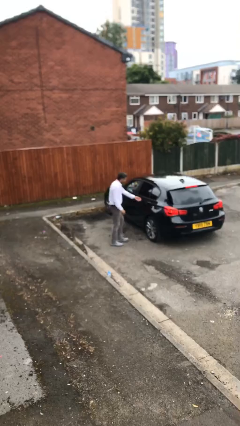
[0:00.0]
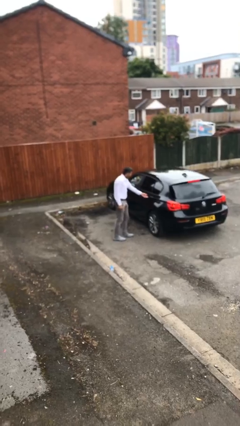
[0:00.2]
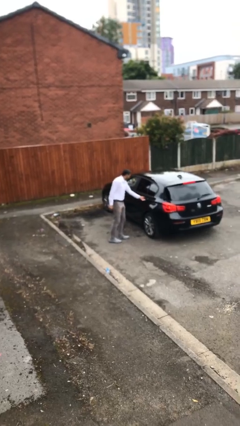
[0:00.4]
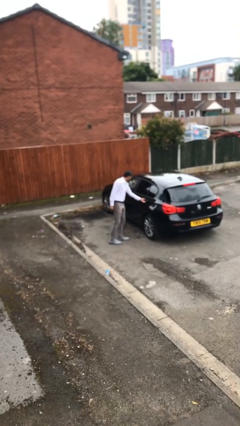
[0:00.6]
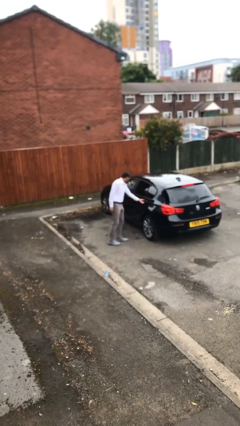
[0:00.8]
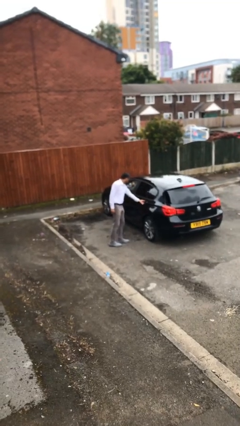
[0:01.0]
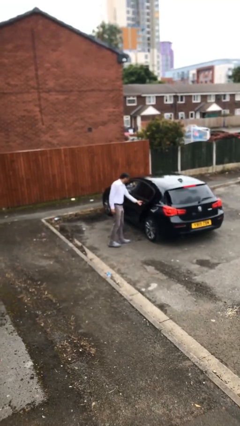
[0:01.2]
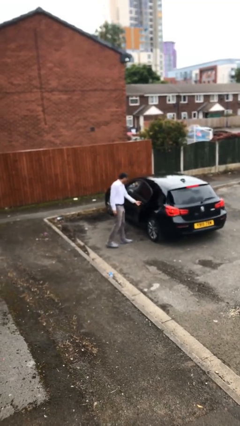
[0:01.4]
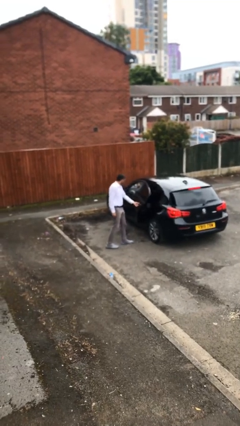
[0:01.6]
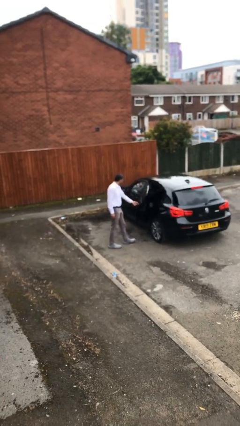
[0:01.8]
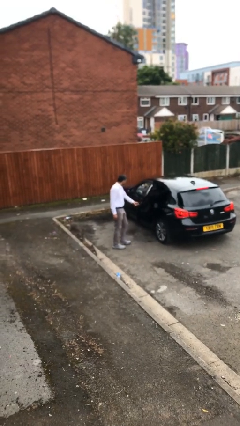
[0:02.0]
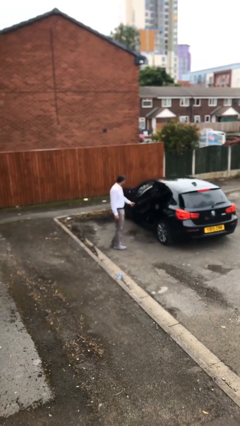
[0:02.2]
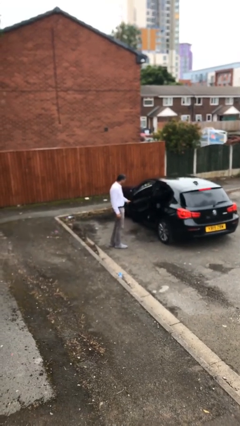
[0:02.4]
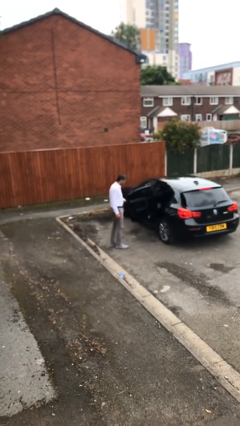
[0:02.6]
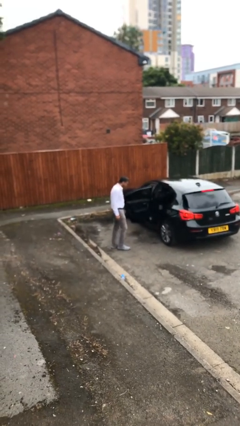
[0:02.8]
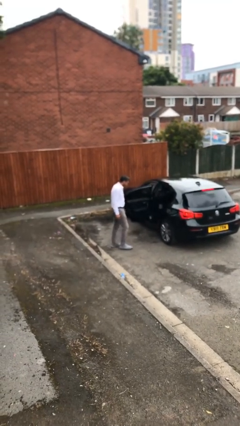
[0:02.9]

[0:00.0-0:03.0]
person opens car door

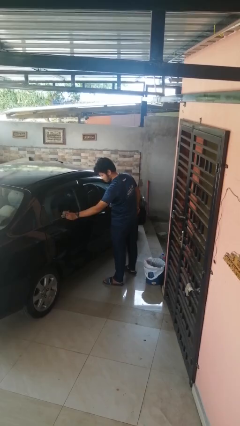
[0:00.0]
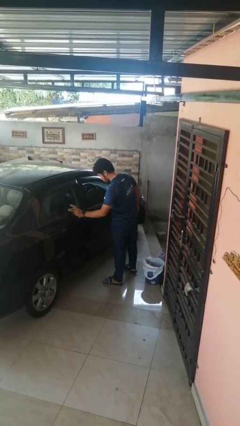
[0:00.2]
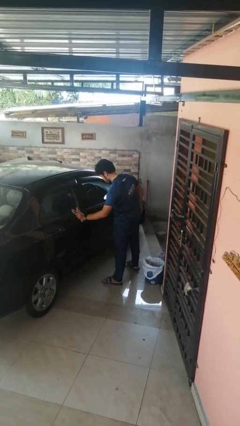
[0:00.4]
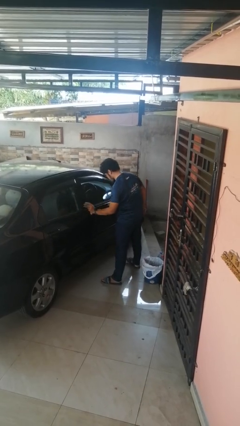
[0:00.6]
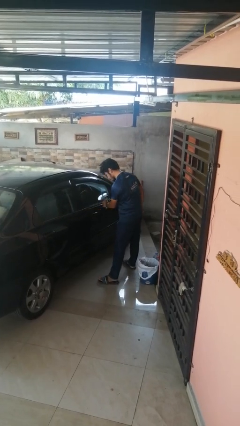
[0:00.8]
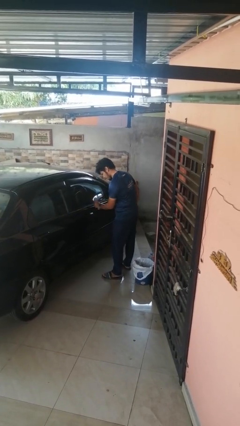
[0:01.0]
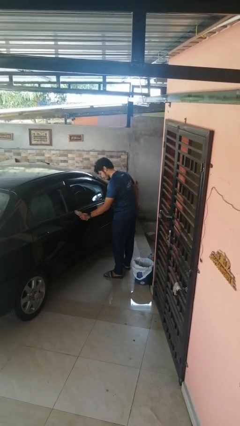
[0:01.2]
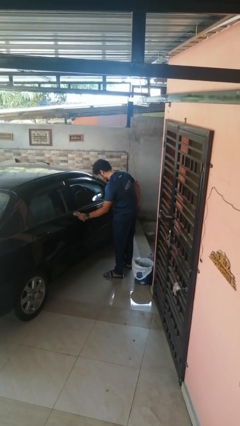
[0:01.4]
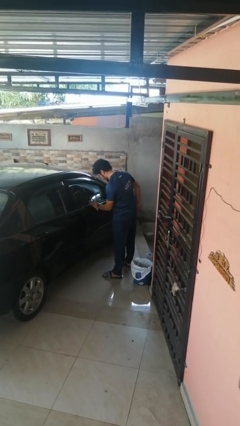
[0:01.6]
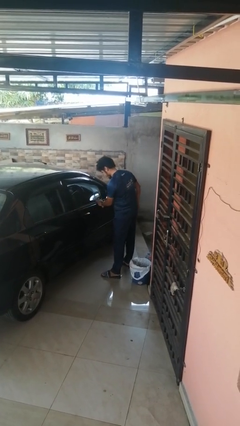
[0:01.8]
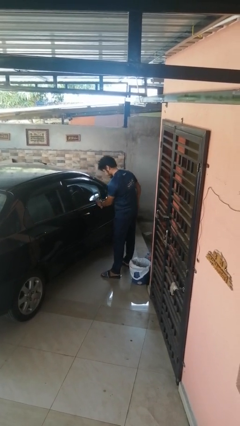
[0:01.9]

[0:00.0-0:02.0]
person polishes car with rag

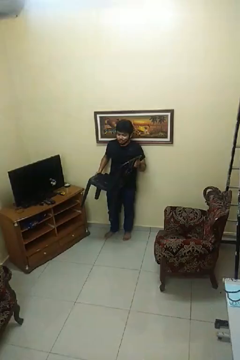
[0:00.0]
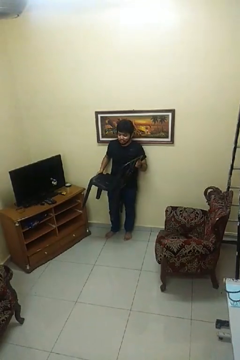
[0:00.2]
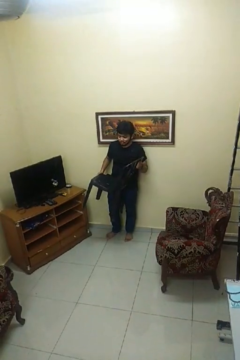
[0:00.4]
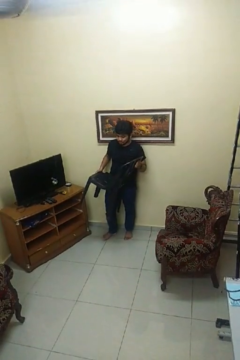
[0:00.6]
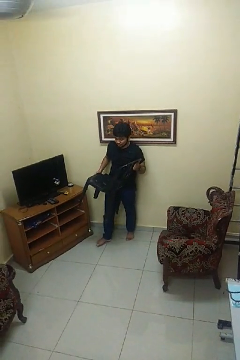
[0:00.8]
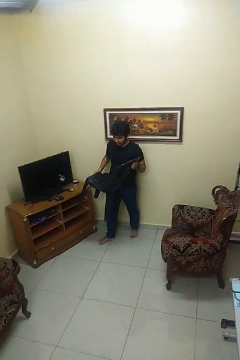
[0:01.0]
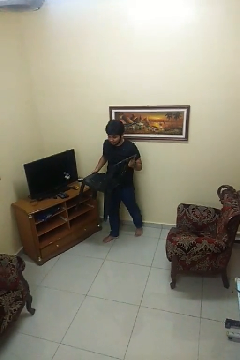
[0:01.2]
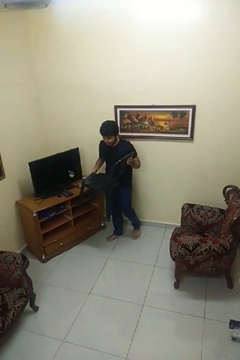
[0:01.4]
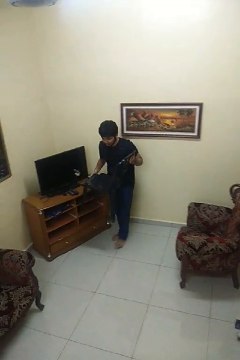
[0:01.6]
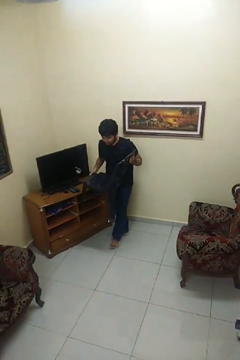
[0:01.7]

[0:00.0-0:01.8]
person carries furniture

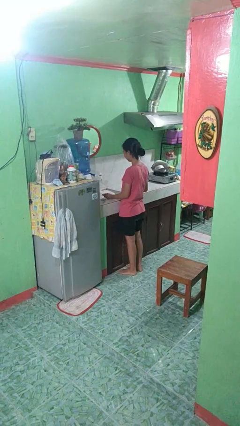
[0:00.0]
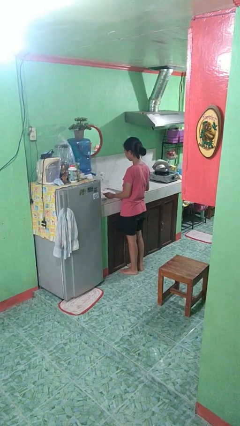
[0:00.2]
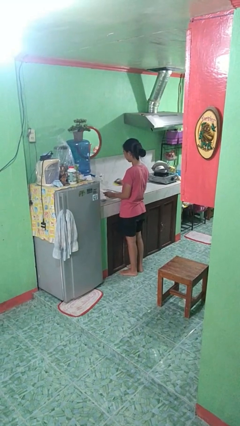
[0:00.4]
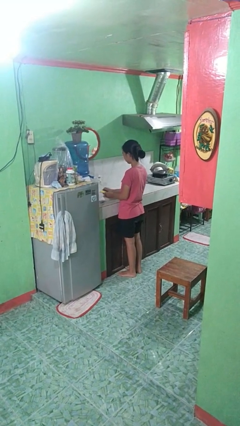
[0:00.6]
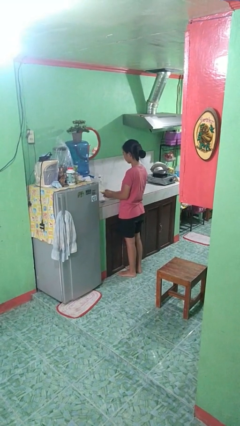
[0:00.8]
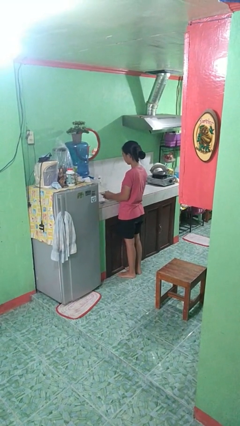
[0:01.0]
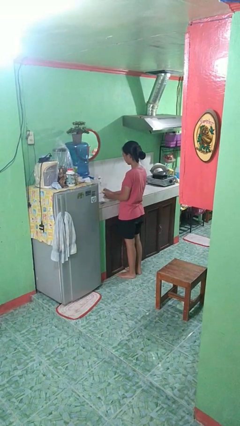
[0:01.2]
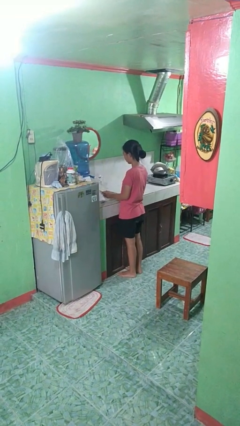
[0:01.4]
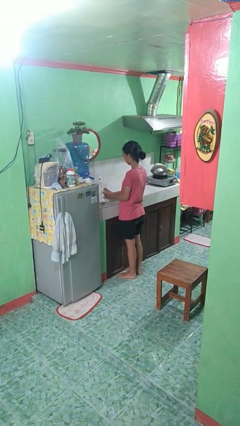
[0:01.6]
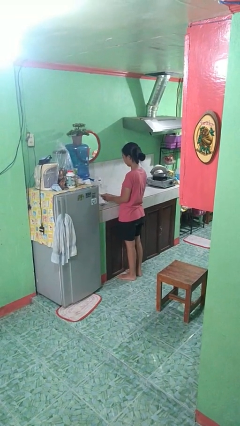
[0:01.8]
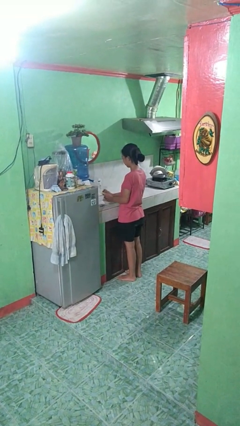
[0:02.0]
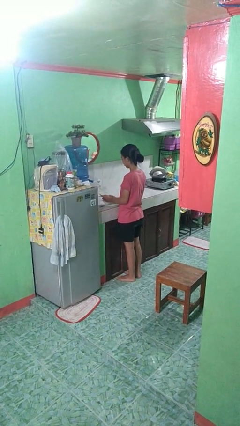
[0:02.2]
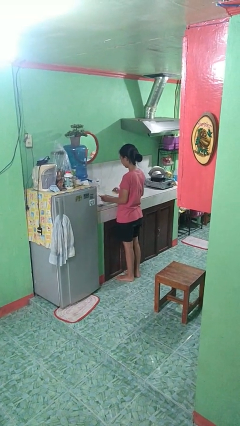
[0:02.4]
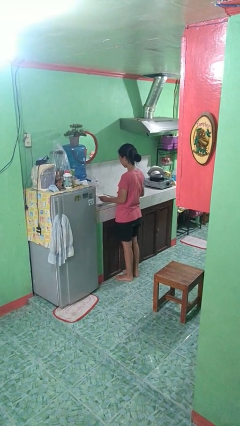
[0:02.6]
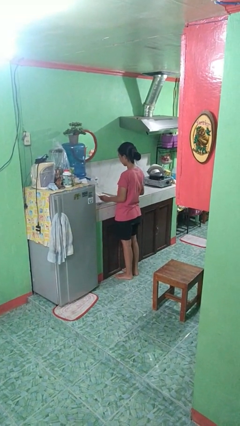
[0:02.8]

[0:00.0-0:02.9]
person washes dish

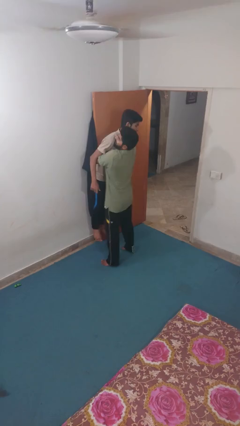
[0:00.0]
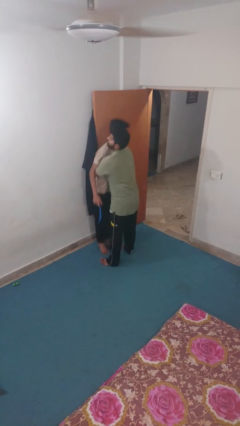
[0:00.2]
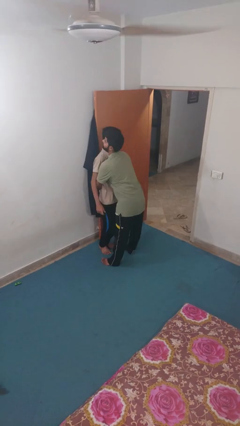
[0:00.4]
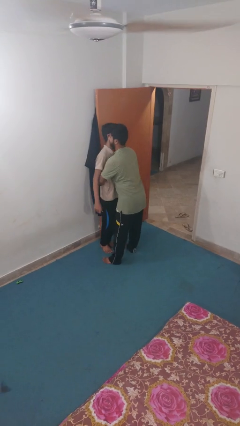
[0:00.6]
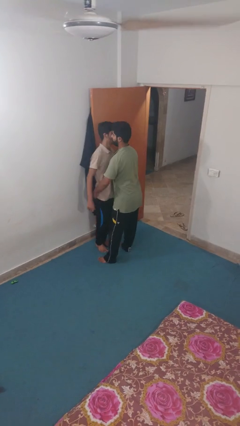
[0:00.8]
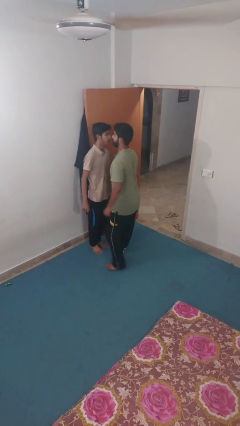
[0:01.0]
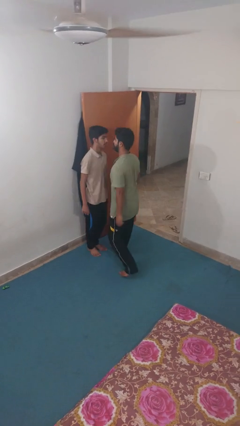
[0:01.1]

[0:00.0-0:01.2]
person puts down person

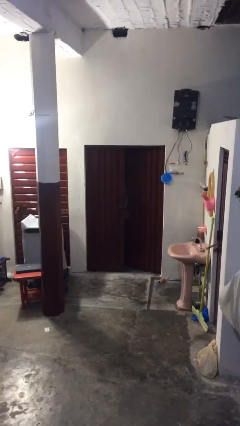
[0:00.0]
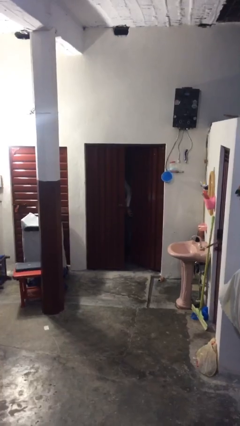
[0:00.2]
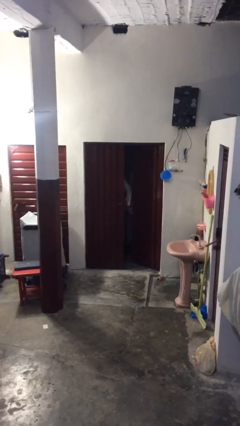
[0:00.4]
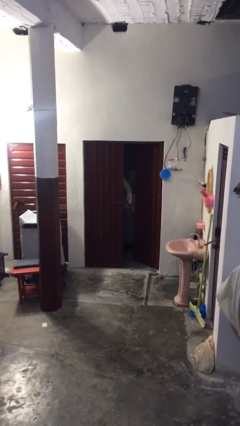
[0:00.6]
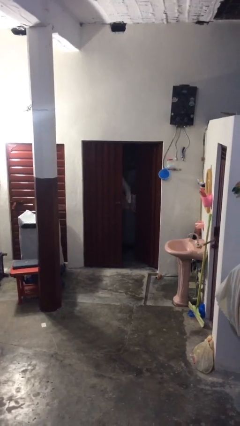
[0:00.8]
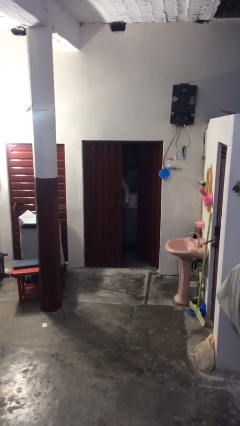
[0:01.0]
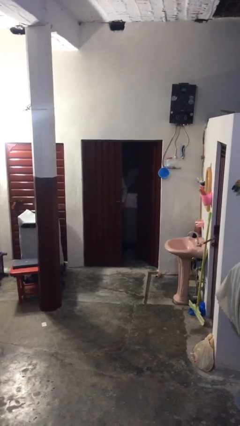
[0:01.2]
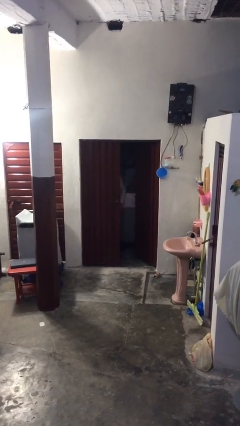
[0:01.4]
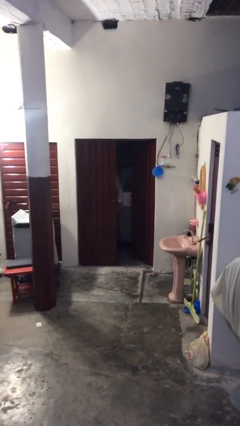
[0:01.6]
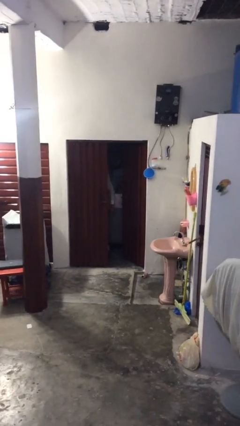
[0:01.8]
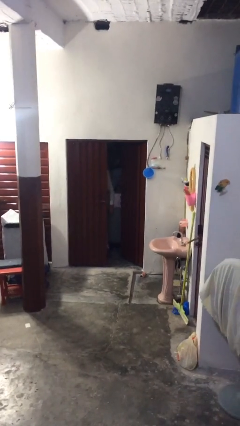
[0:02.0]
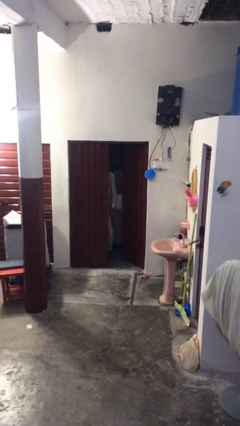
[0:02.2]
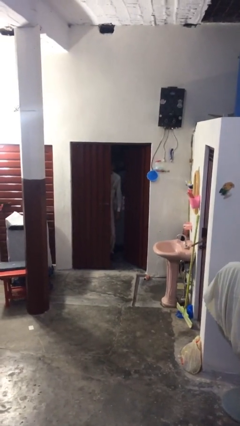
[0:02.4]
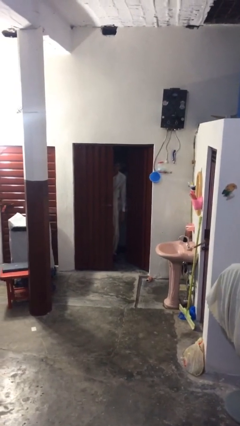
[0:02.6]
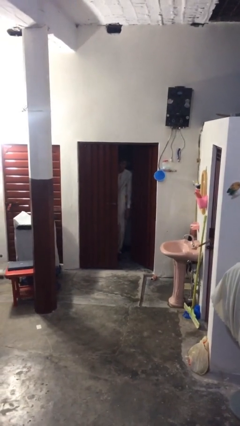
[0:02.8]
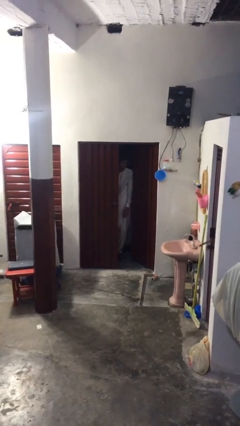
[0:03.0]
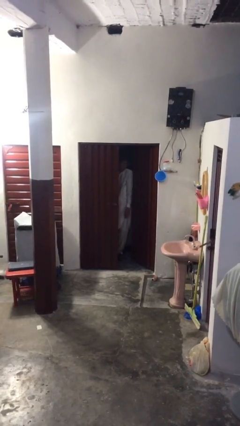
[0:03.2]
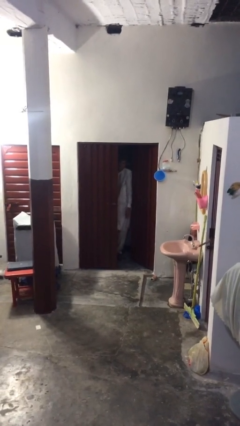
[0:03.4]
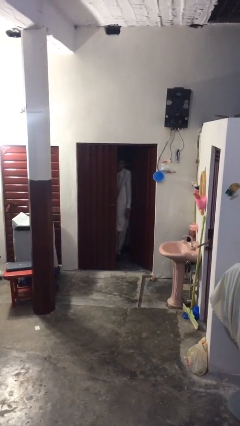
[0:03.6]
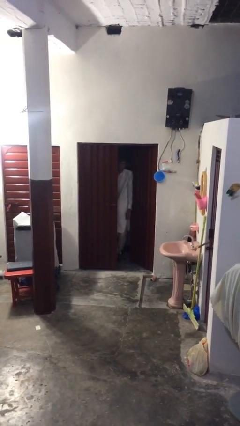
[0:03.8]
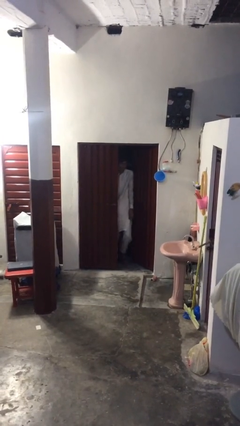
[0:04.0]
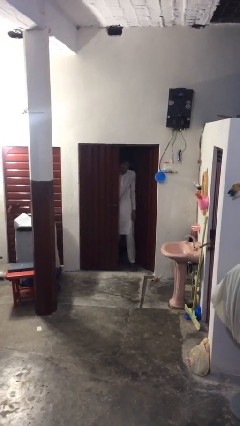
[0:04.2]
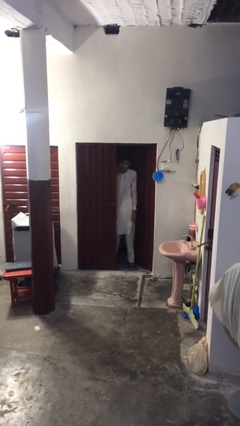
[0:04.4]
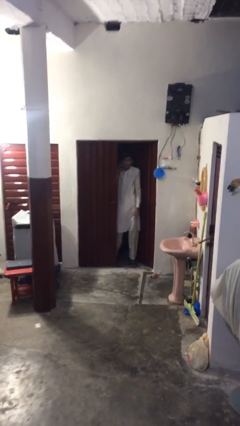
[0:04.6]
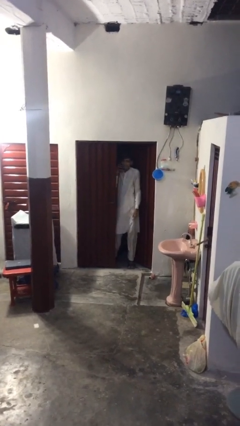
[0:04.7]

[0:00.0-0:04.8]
person opens facility door

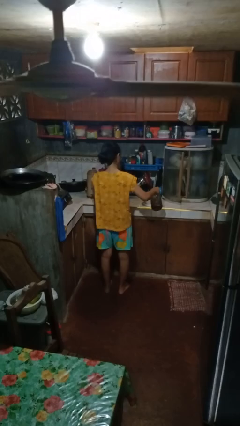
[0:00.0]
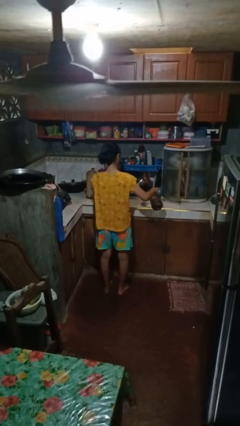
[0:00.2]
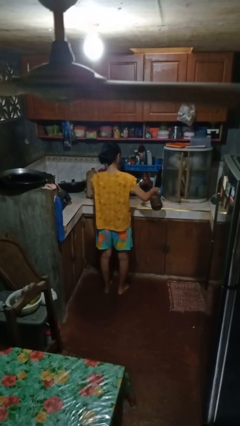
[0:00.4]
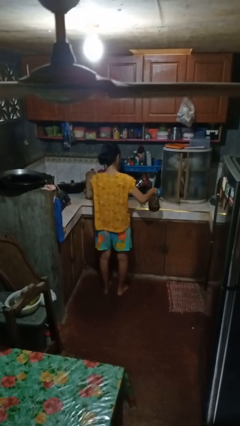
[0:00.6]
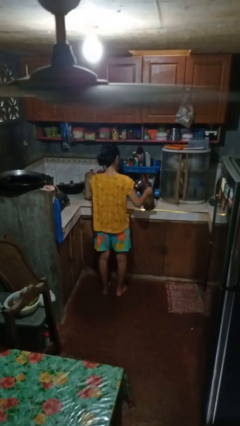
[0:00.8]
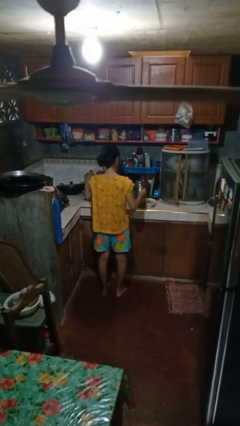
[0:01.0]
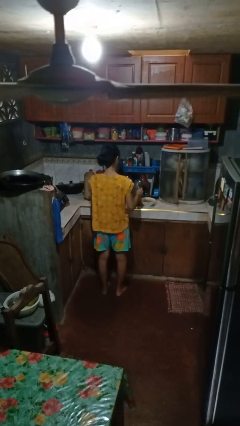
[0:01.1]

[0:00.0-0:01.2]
person pours into bowl

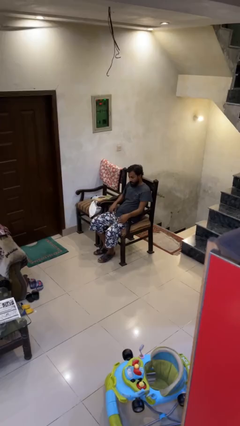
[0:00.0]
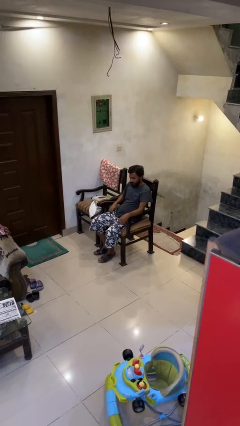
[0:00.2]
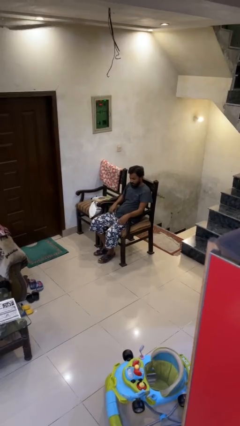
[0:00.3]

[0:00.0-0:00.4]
person gestures peace
